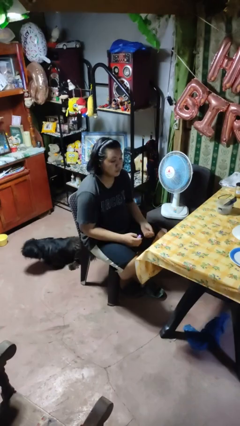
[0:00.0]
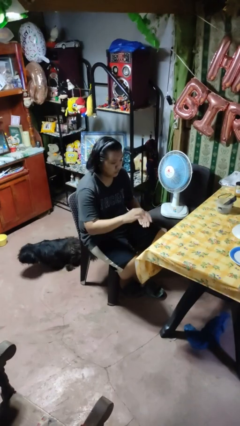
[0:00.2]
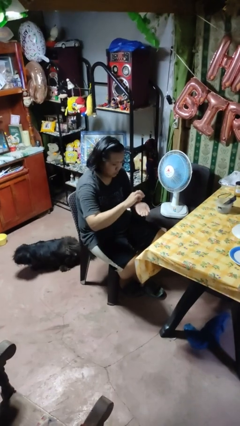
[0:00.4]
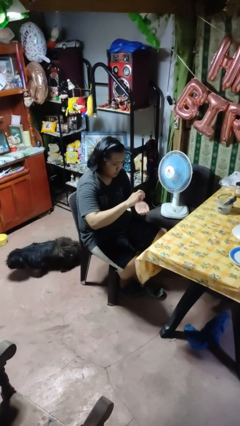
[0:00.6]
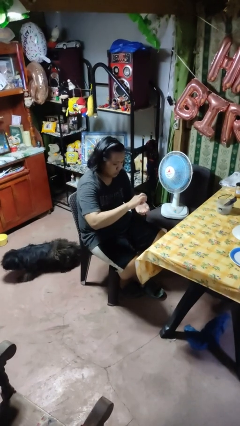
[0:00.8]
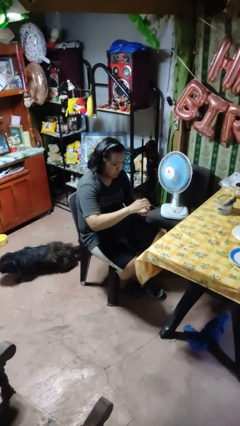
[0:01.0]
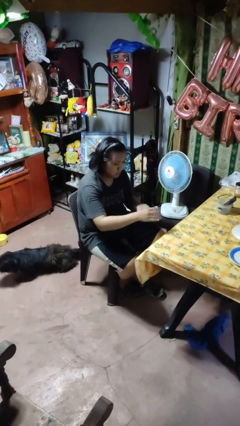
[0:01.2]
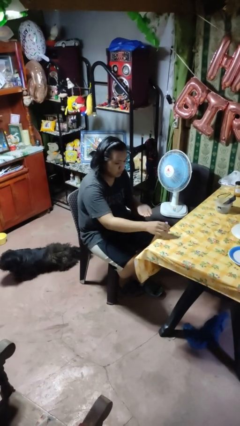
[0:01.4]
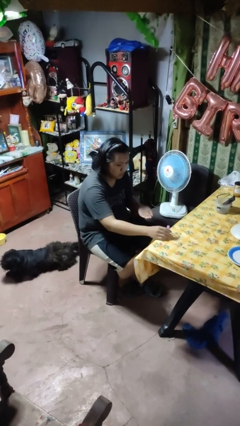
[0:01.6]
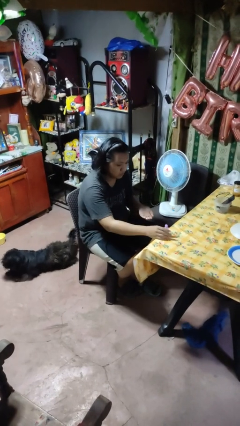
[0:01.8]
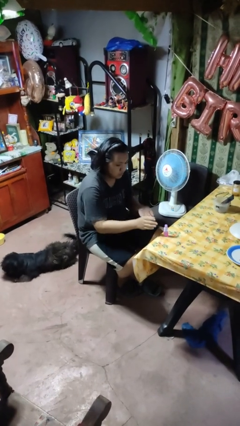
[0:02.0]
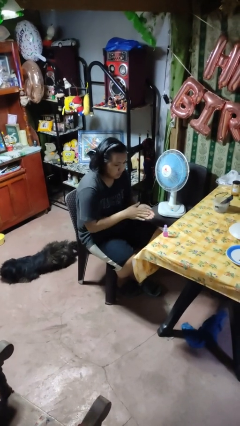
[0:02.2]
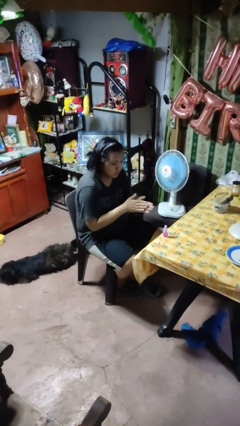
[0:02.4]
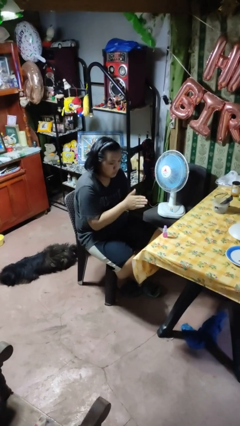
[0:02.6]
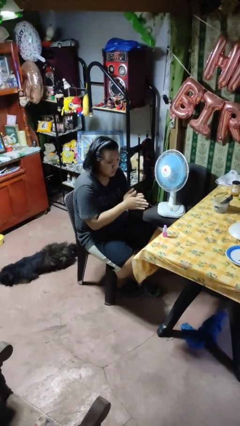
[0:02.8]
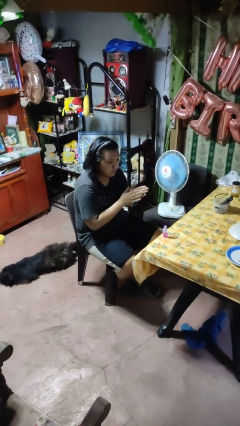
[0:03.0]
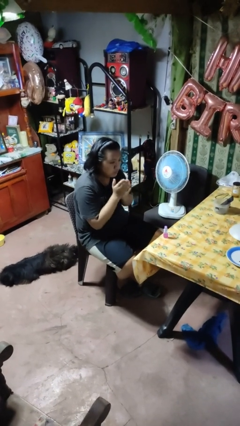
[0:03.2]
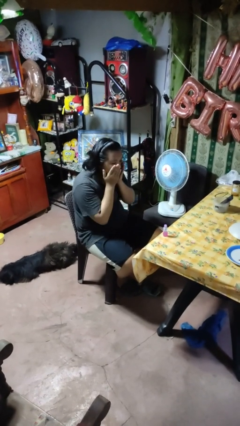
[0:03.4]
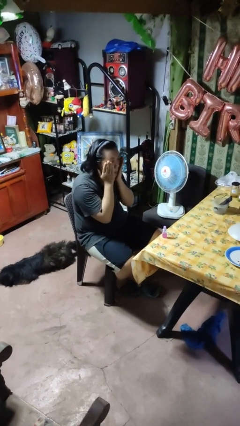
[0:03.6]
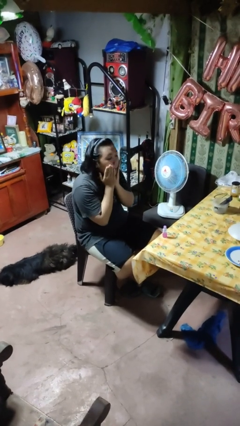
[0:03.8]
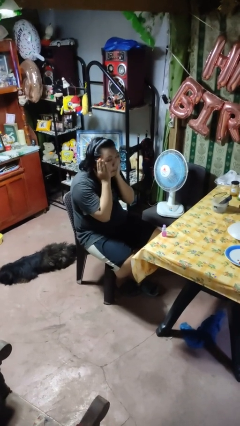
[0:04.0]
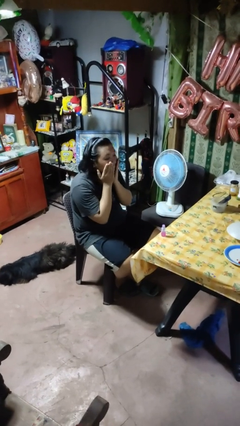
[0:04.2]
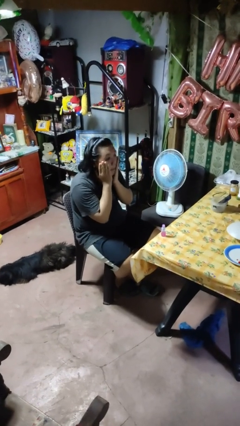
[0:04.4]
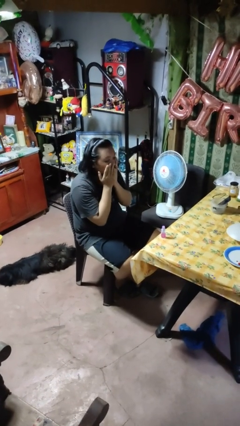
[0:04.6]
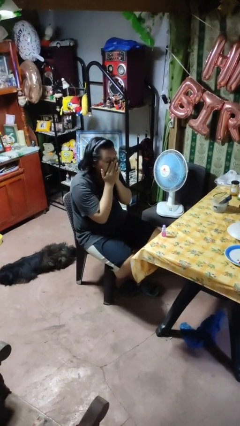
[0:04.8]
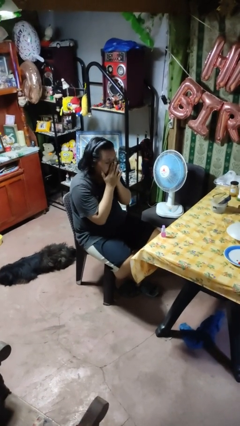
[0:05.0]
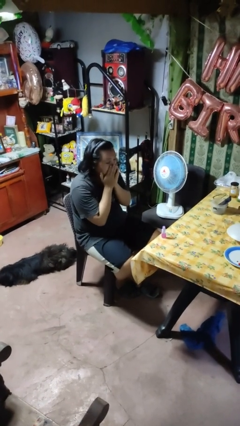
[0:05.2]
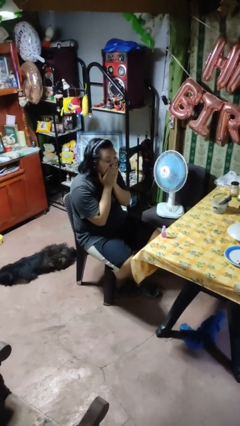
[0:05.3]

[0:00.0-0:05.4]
person applies facial moisturizer

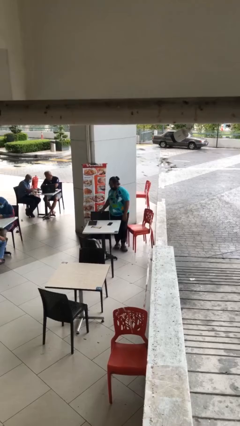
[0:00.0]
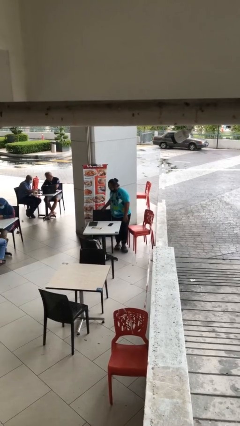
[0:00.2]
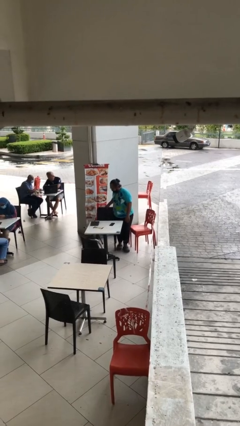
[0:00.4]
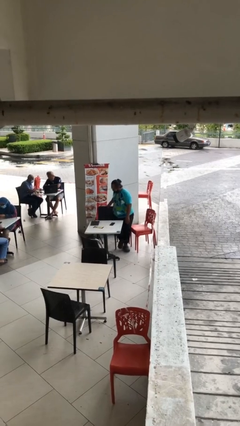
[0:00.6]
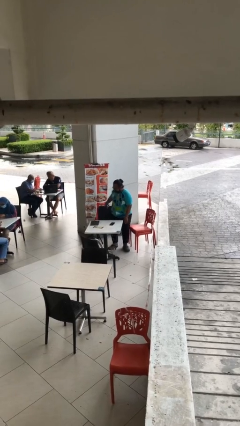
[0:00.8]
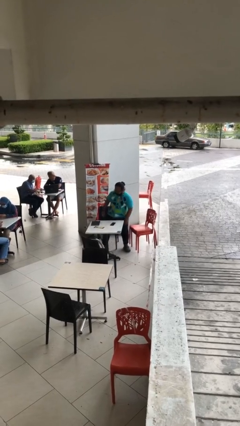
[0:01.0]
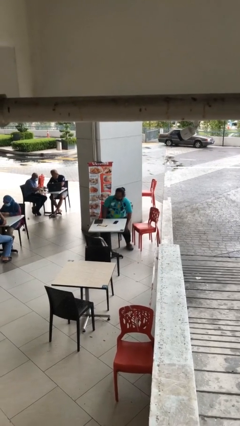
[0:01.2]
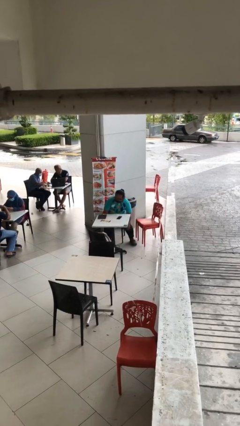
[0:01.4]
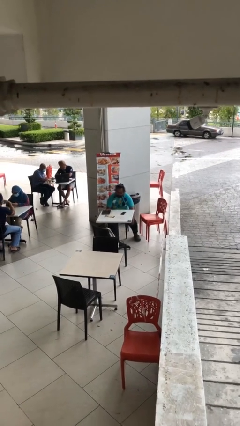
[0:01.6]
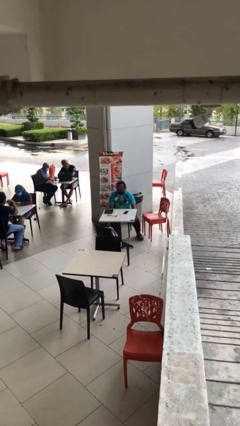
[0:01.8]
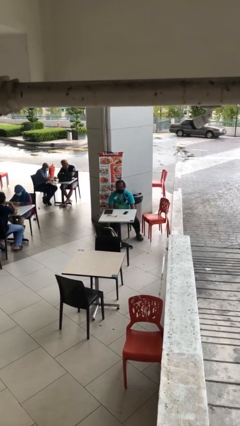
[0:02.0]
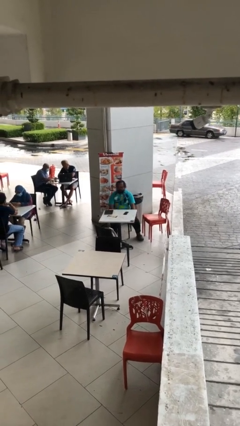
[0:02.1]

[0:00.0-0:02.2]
person sits down

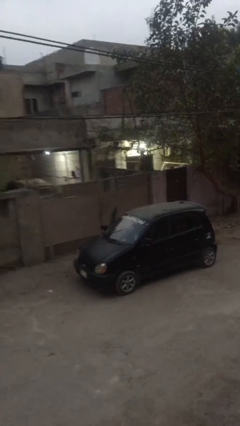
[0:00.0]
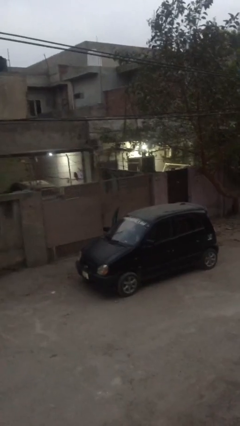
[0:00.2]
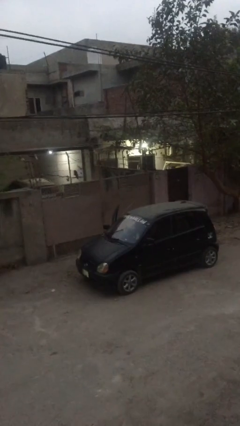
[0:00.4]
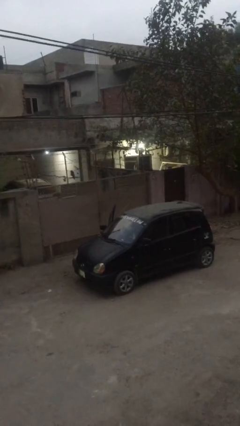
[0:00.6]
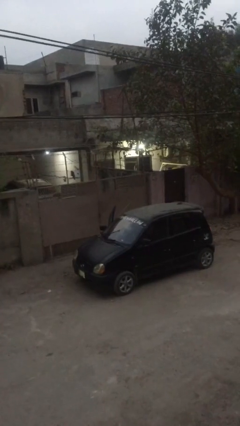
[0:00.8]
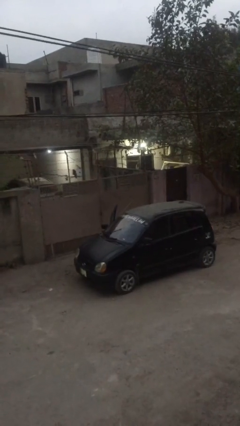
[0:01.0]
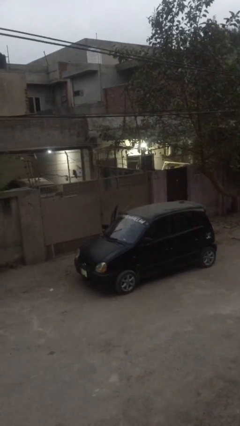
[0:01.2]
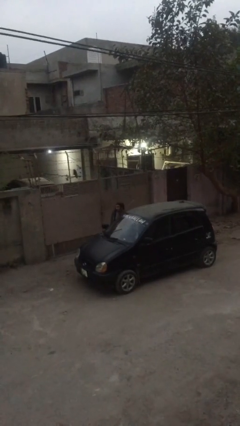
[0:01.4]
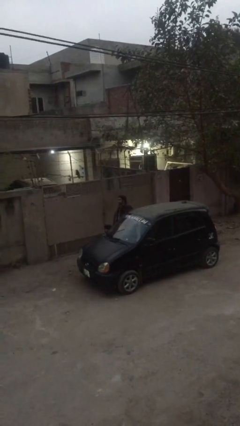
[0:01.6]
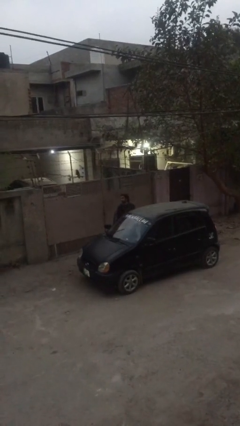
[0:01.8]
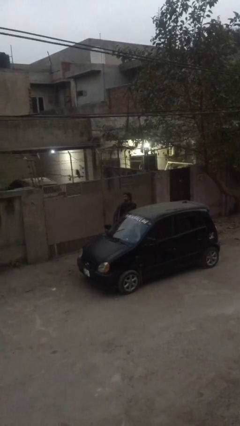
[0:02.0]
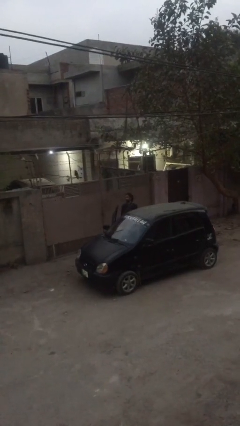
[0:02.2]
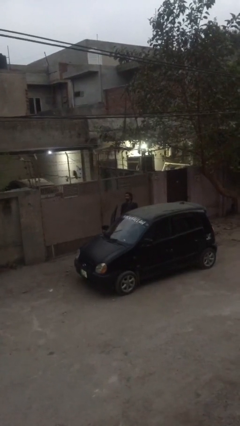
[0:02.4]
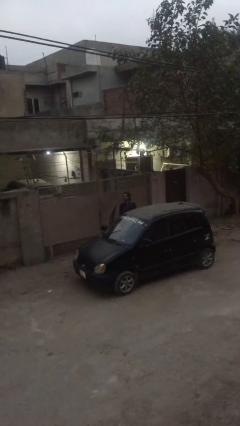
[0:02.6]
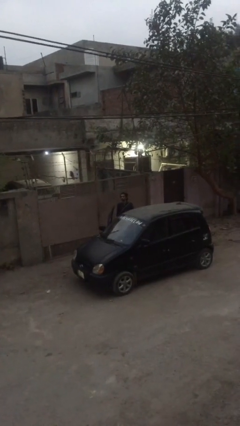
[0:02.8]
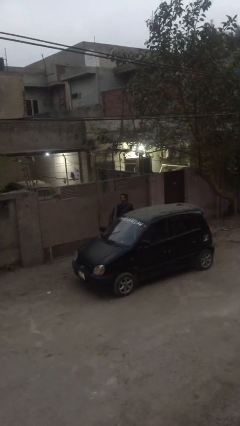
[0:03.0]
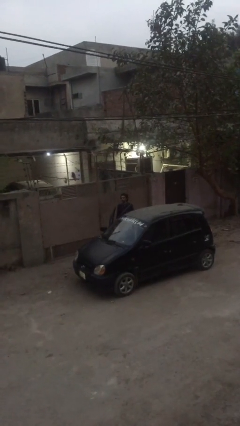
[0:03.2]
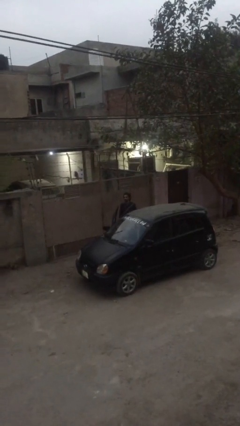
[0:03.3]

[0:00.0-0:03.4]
person exits car

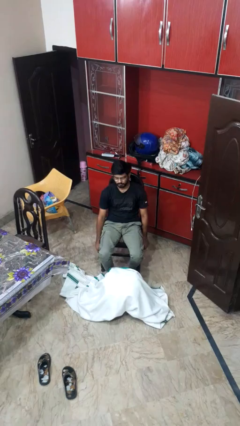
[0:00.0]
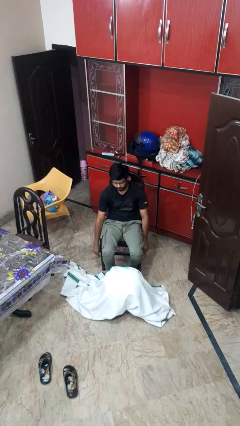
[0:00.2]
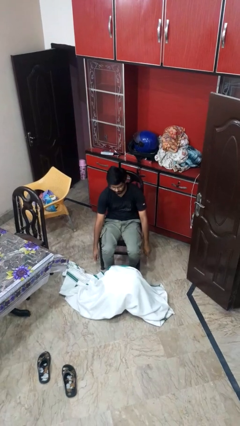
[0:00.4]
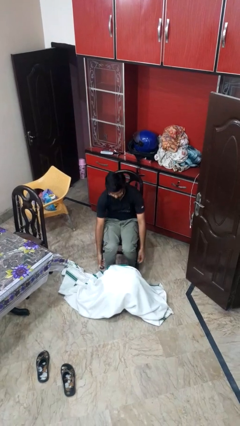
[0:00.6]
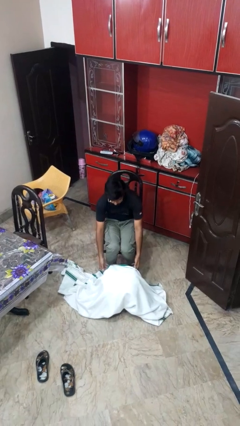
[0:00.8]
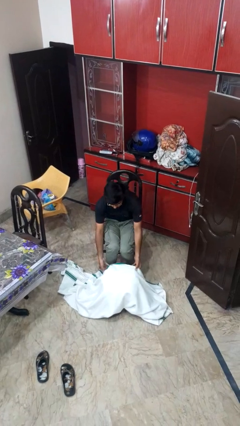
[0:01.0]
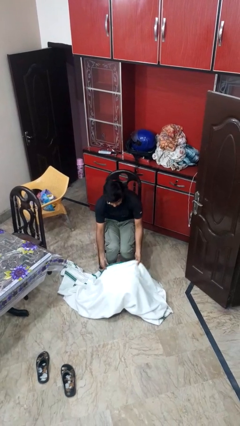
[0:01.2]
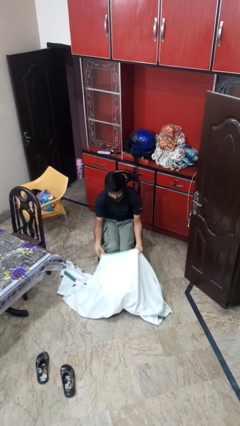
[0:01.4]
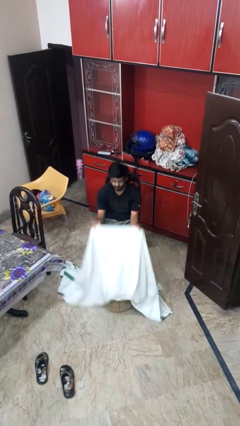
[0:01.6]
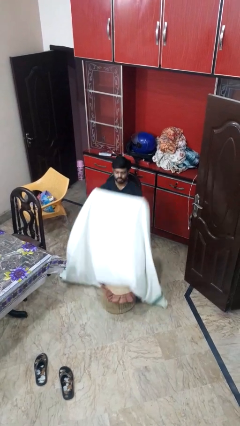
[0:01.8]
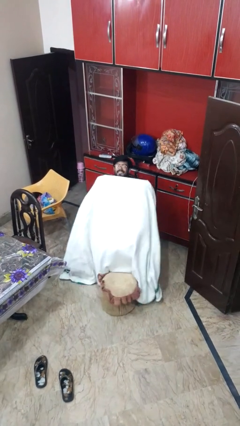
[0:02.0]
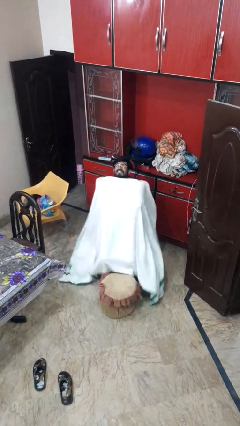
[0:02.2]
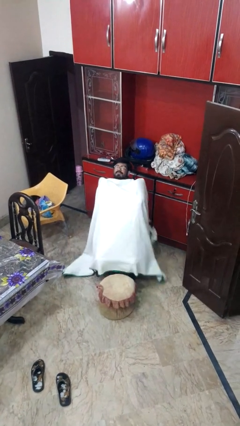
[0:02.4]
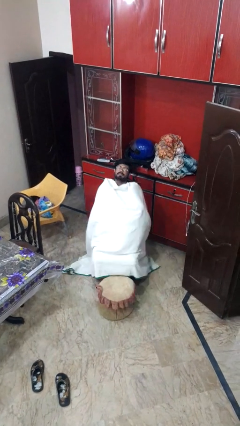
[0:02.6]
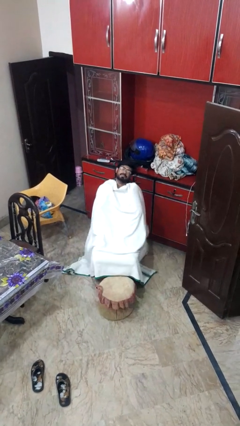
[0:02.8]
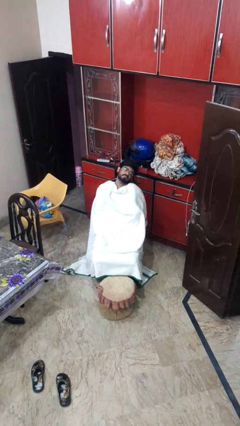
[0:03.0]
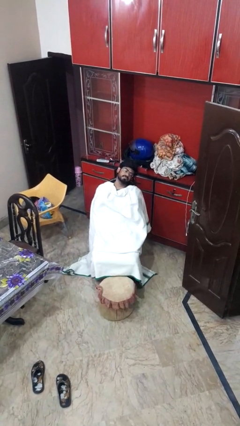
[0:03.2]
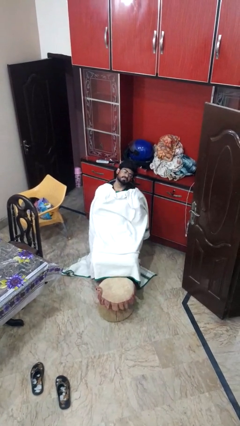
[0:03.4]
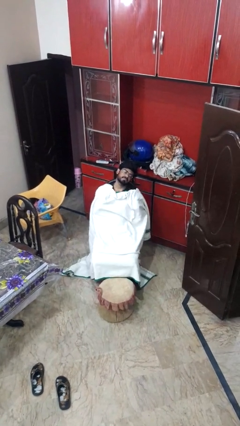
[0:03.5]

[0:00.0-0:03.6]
person covers with blanket

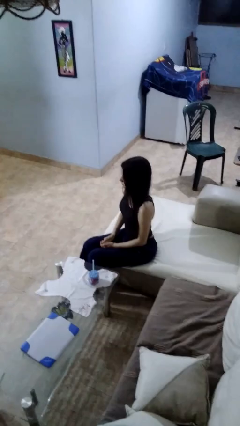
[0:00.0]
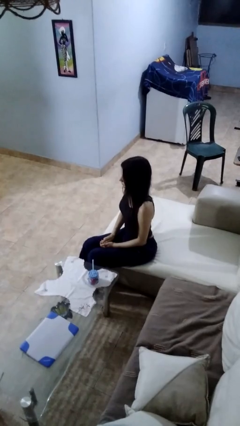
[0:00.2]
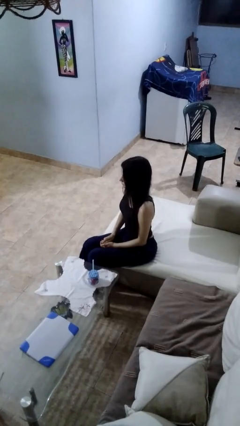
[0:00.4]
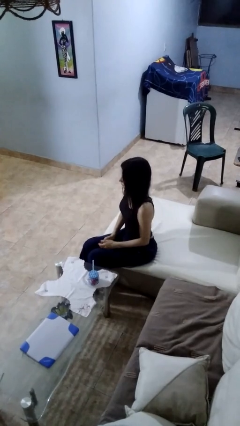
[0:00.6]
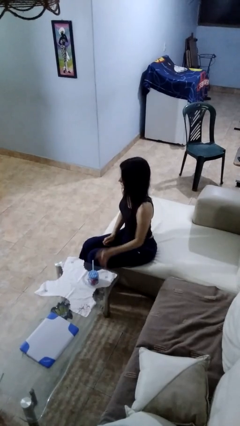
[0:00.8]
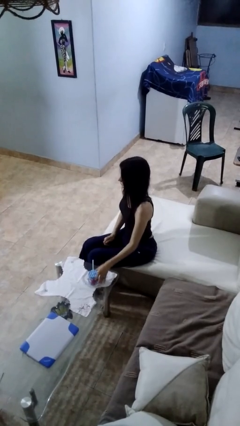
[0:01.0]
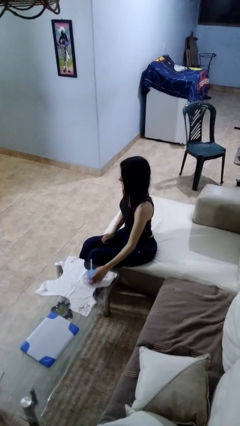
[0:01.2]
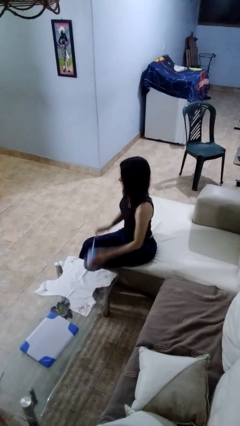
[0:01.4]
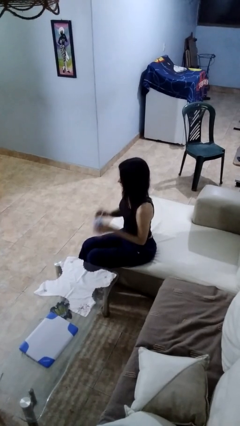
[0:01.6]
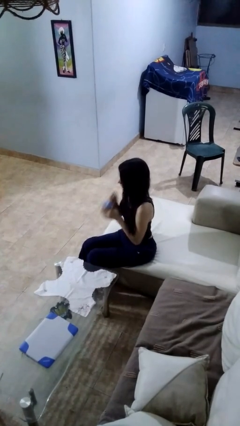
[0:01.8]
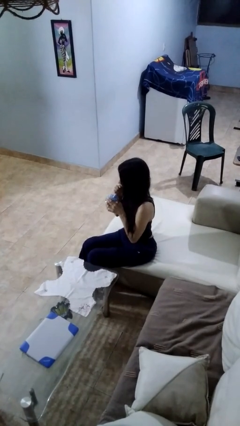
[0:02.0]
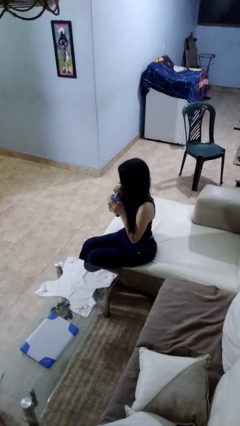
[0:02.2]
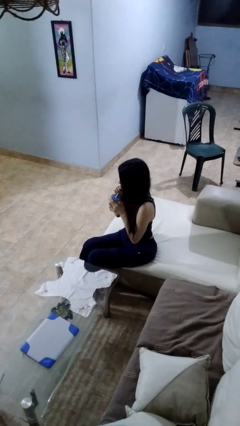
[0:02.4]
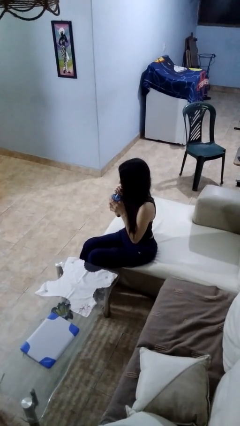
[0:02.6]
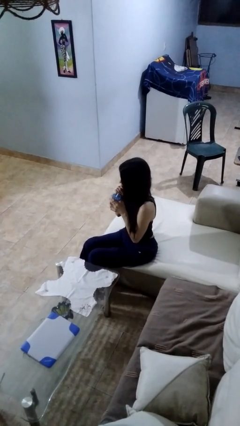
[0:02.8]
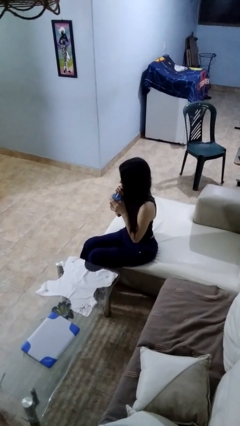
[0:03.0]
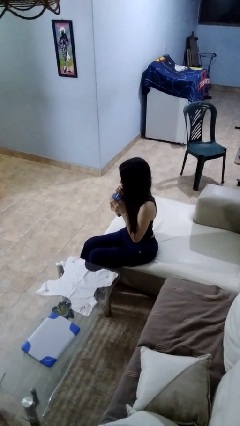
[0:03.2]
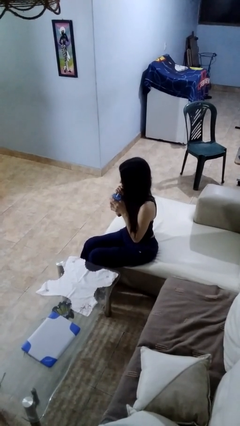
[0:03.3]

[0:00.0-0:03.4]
person drinks from straw
